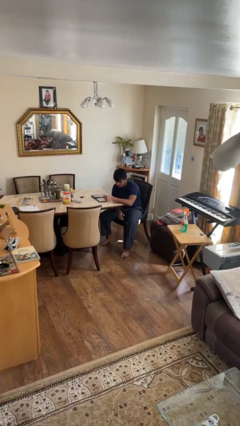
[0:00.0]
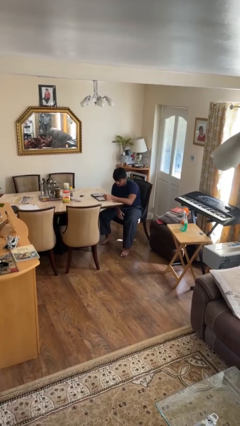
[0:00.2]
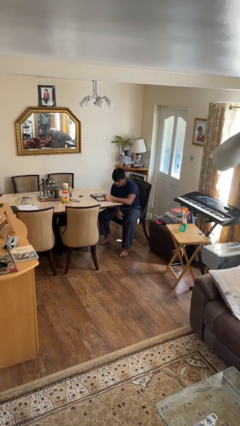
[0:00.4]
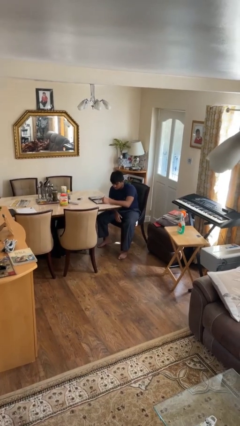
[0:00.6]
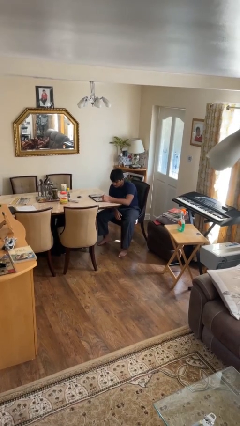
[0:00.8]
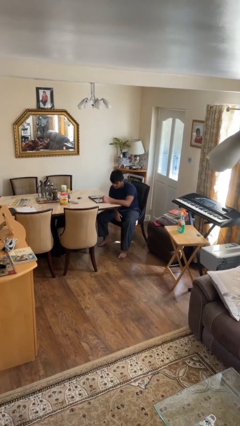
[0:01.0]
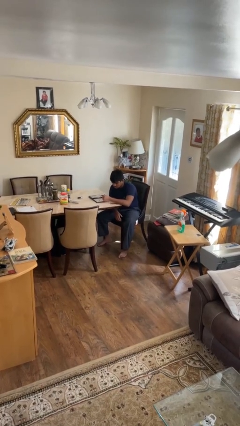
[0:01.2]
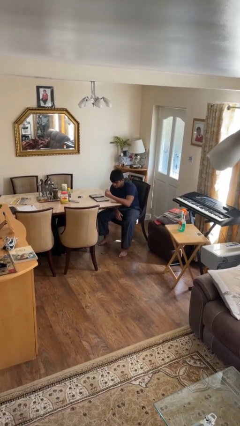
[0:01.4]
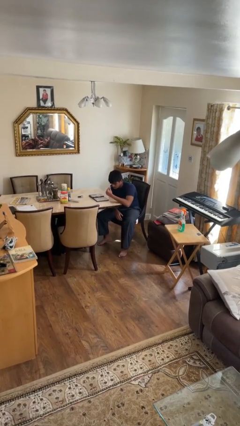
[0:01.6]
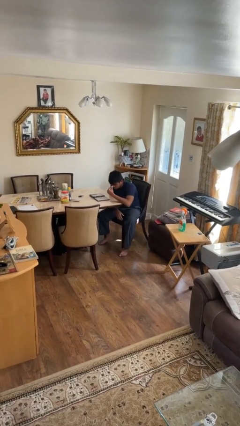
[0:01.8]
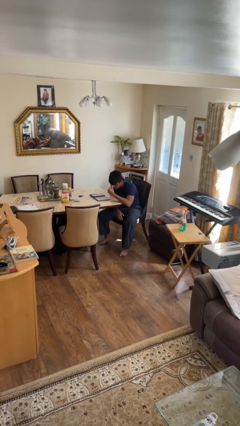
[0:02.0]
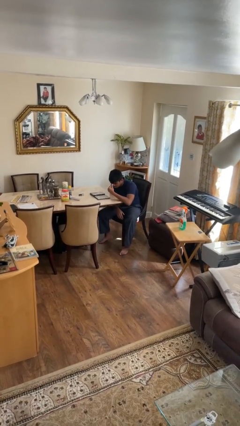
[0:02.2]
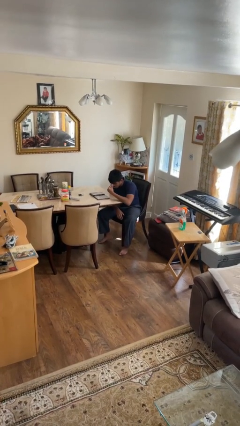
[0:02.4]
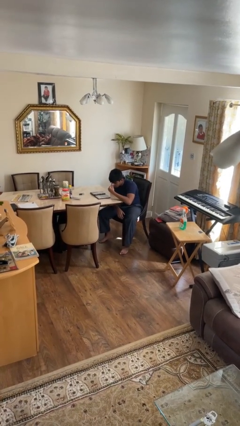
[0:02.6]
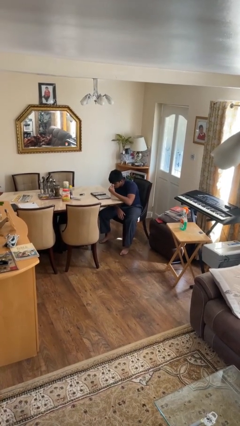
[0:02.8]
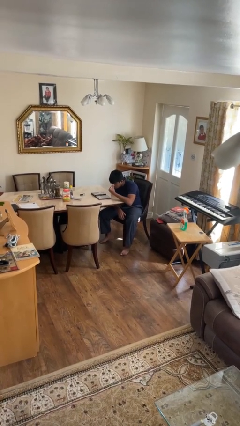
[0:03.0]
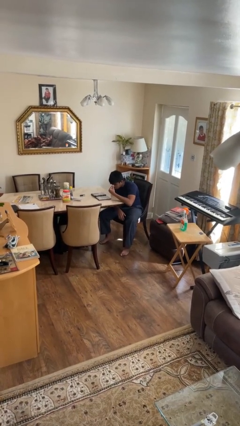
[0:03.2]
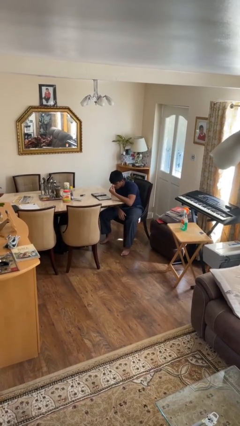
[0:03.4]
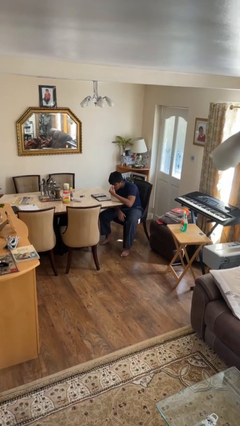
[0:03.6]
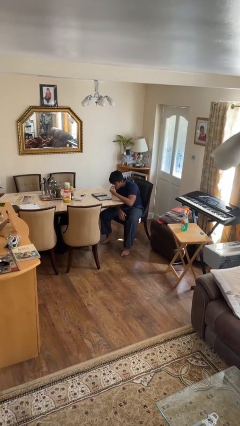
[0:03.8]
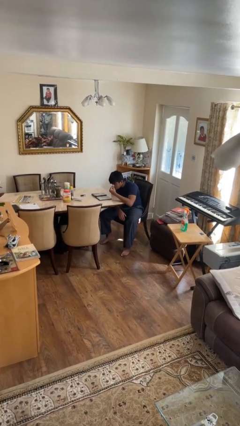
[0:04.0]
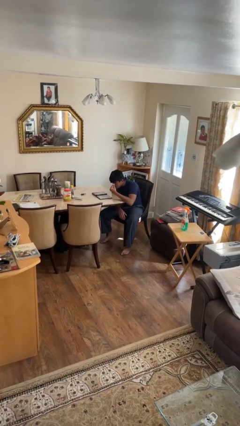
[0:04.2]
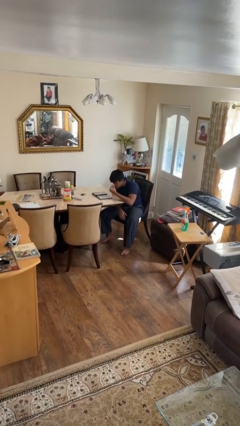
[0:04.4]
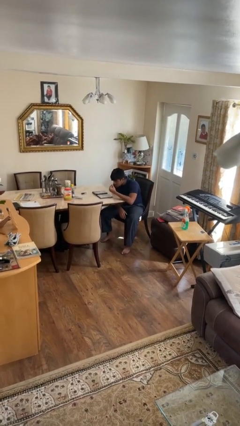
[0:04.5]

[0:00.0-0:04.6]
person applies eye makeup

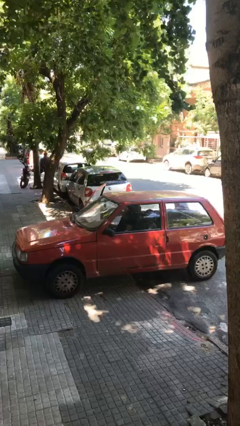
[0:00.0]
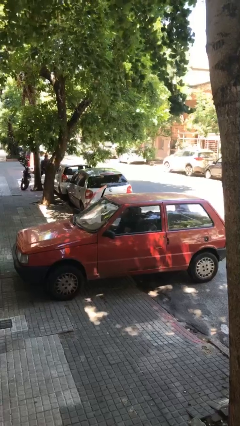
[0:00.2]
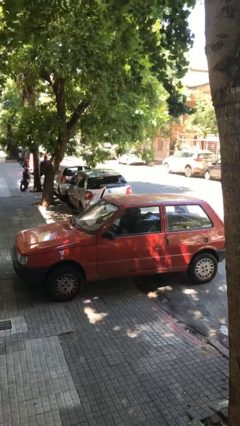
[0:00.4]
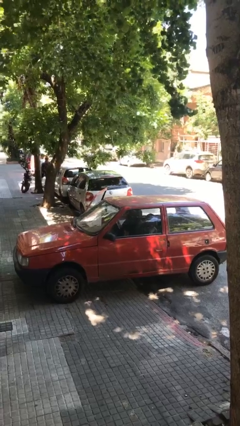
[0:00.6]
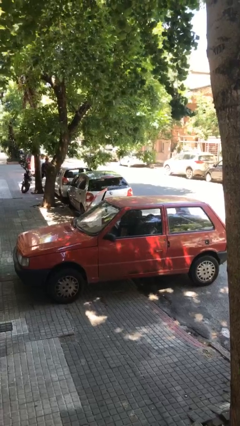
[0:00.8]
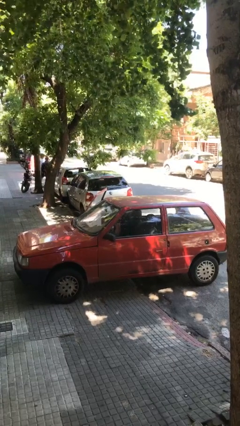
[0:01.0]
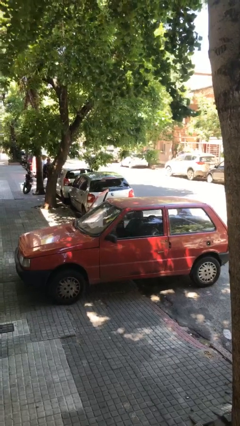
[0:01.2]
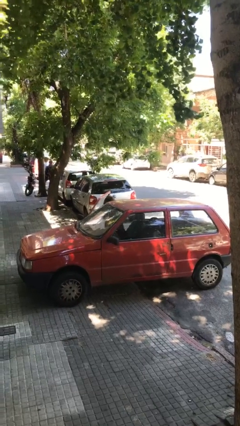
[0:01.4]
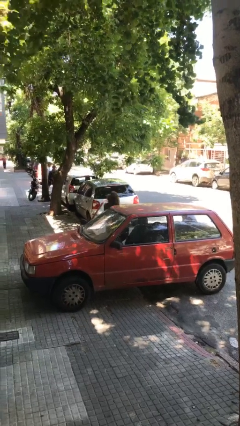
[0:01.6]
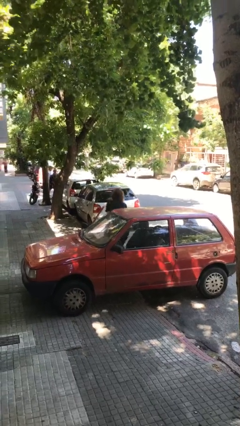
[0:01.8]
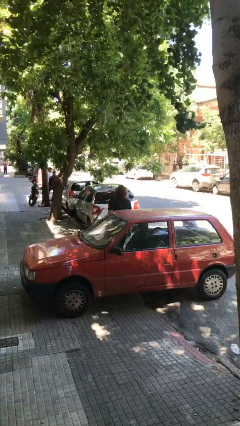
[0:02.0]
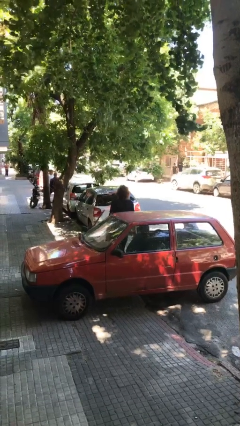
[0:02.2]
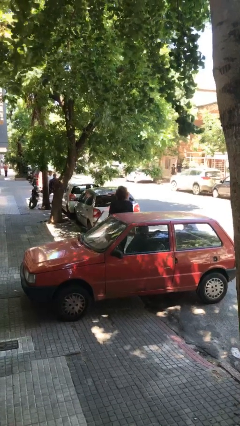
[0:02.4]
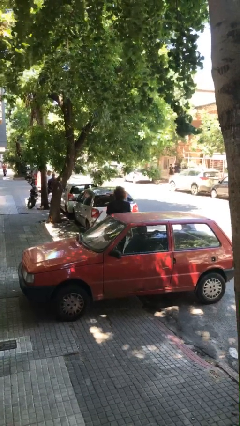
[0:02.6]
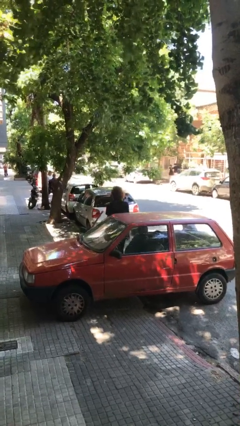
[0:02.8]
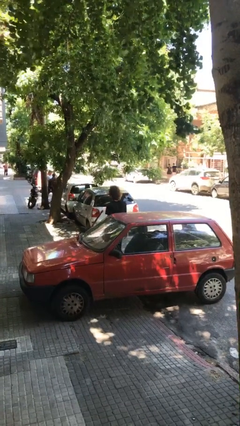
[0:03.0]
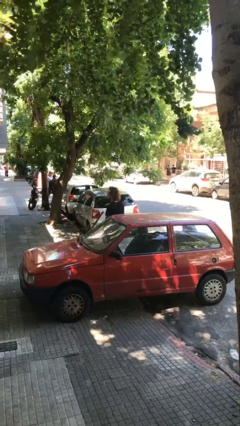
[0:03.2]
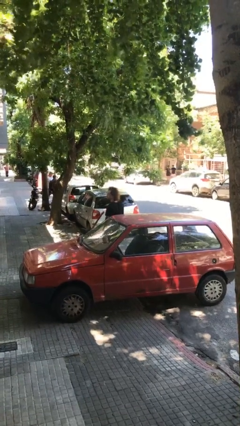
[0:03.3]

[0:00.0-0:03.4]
person exits car

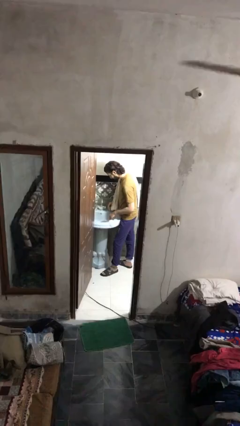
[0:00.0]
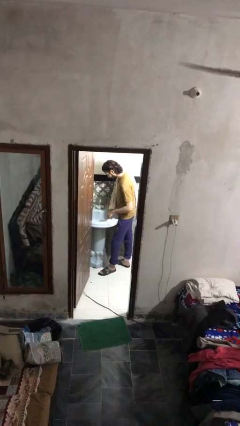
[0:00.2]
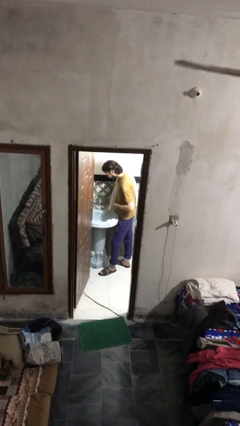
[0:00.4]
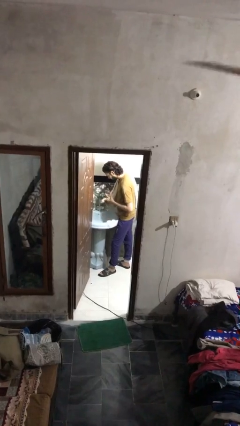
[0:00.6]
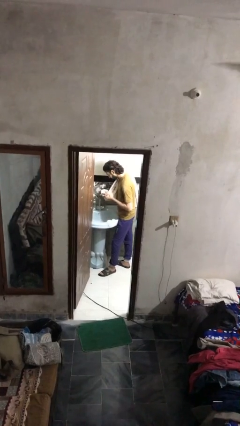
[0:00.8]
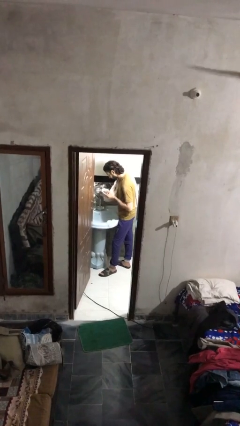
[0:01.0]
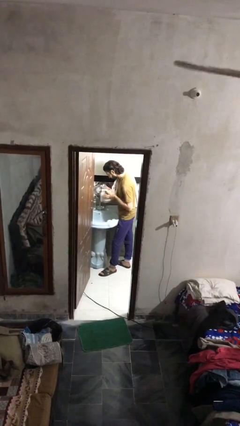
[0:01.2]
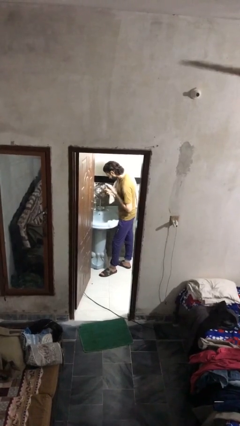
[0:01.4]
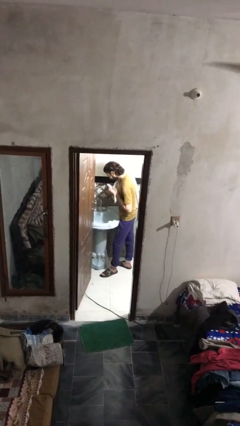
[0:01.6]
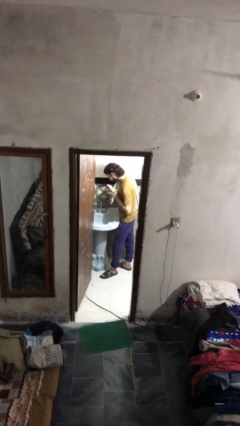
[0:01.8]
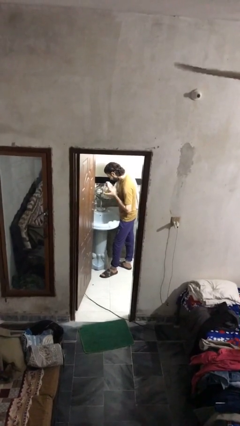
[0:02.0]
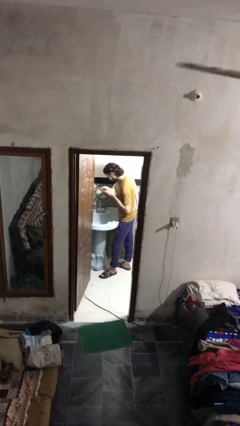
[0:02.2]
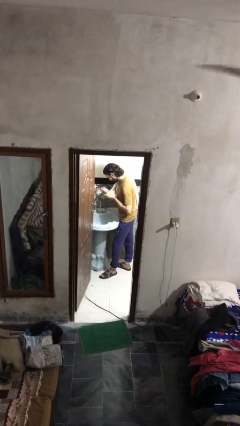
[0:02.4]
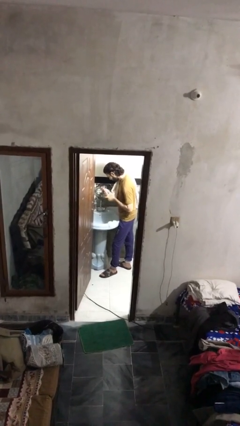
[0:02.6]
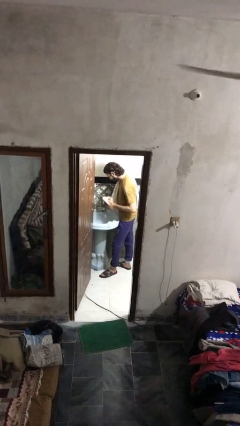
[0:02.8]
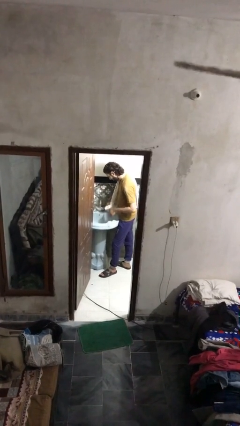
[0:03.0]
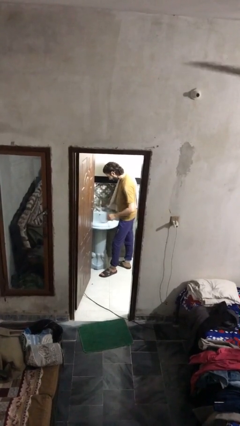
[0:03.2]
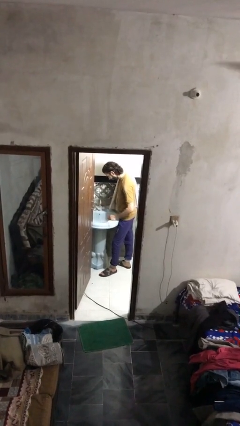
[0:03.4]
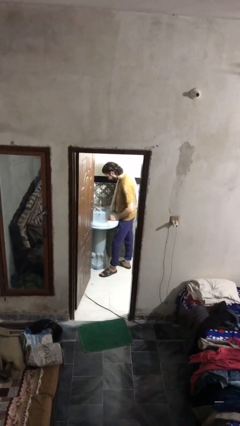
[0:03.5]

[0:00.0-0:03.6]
person dries hands with towel

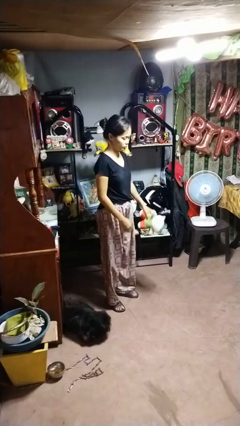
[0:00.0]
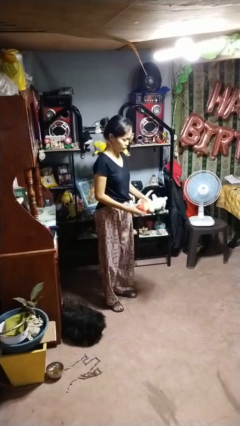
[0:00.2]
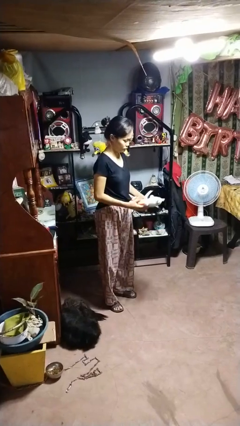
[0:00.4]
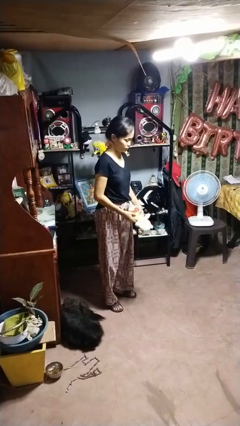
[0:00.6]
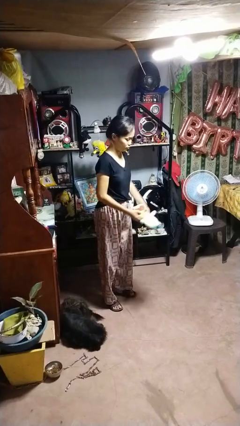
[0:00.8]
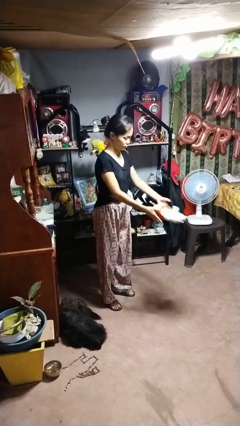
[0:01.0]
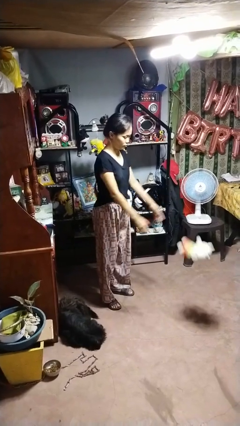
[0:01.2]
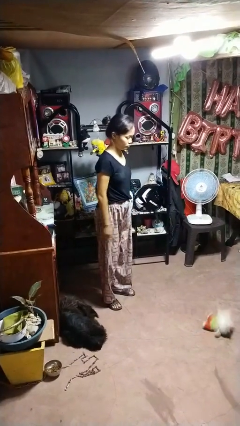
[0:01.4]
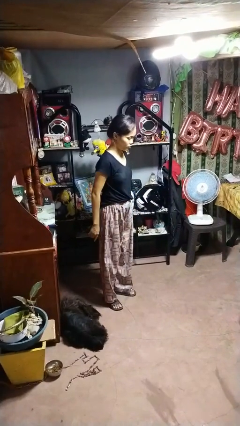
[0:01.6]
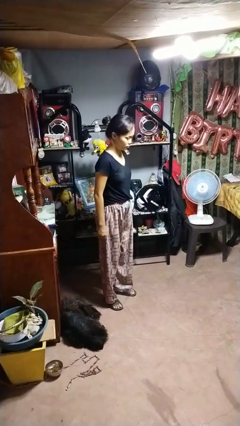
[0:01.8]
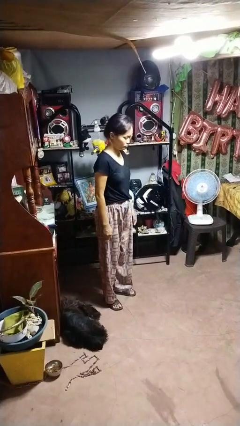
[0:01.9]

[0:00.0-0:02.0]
person throws object to ground

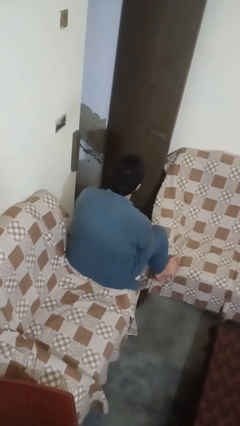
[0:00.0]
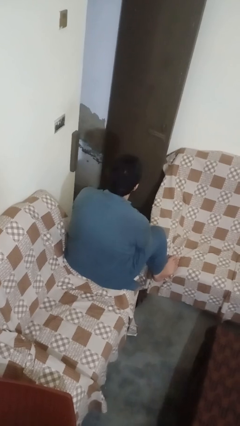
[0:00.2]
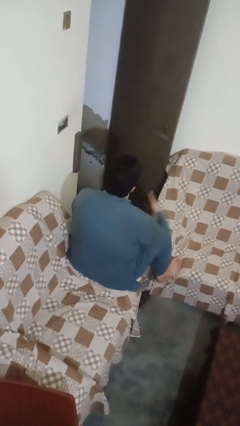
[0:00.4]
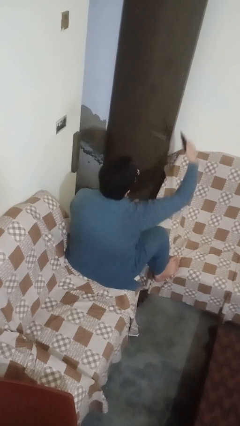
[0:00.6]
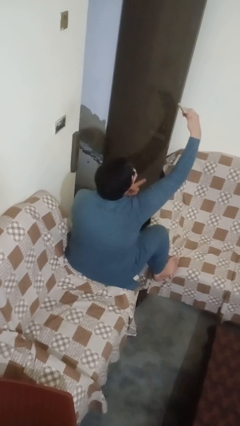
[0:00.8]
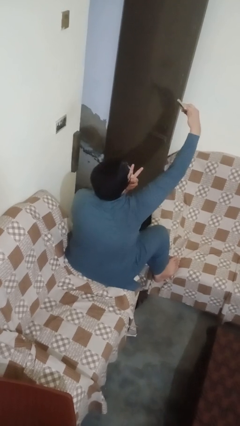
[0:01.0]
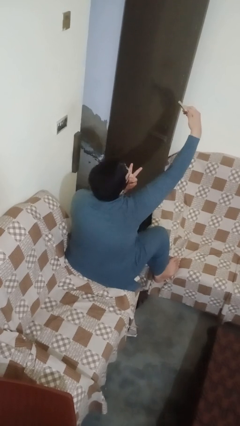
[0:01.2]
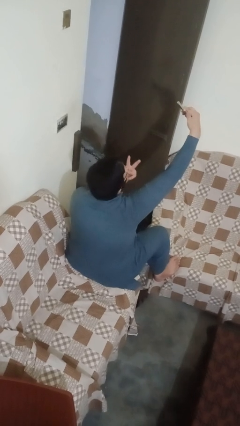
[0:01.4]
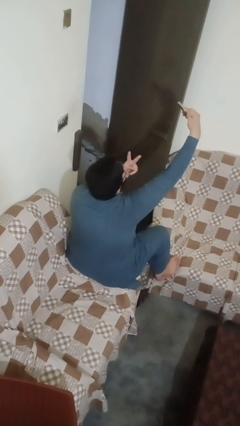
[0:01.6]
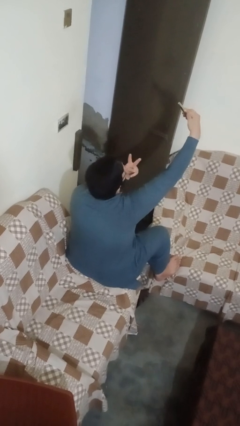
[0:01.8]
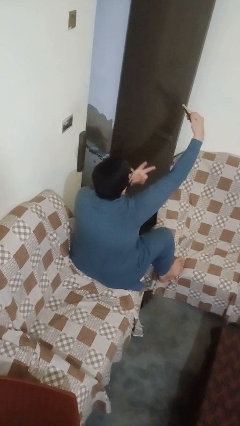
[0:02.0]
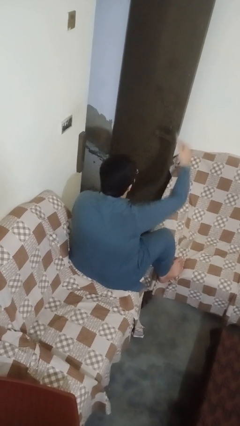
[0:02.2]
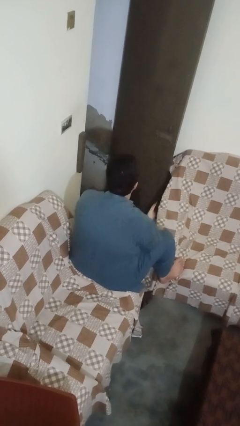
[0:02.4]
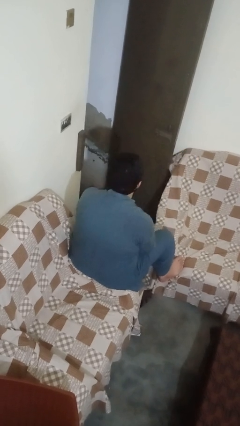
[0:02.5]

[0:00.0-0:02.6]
person takes selfie

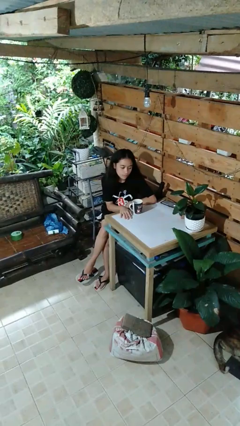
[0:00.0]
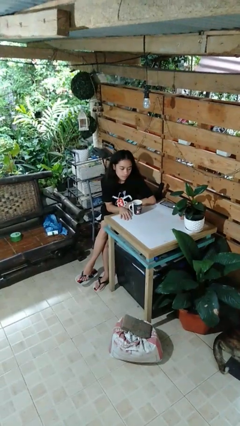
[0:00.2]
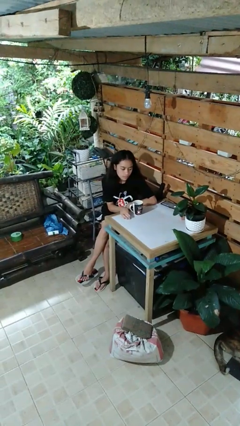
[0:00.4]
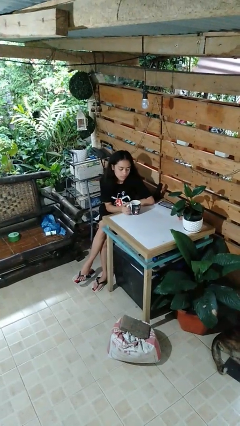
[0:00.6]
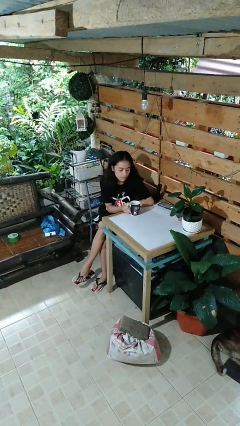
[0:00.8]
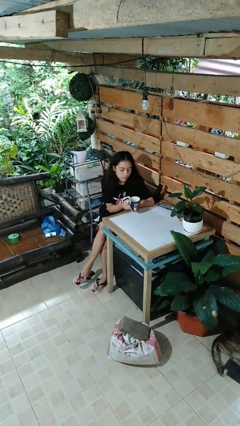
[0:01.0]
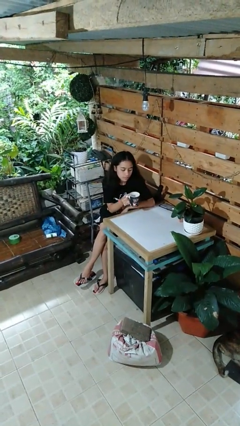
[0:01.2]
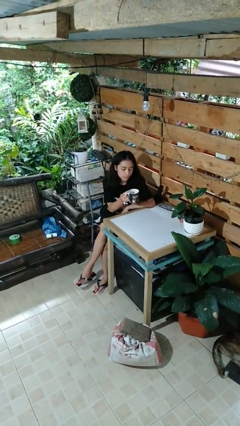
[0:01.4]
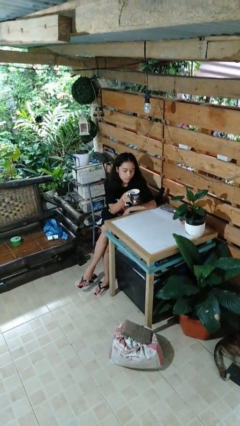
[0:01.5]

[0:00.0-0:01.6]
person picks up object from table

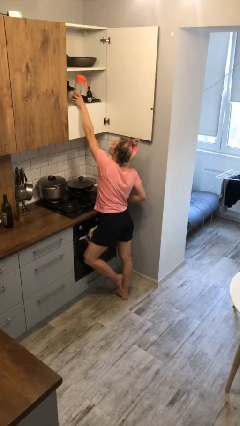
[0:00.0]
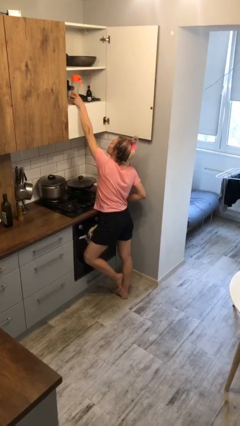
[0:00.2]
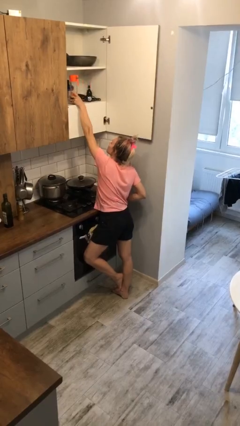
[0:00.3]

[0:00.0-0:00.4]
person puts down object into cabinet
